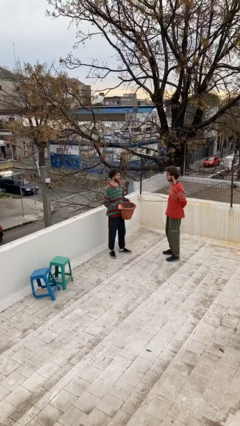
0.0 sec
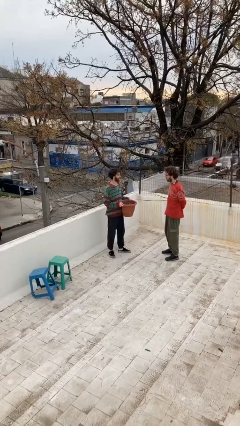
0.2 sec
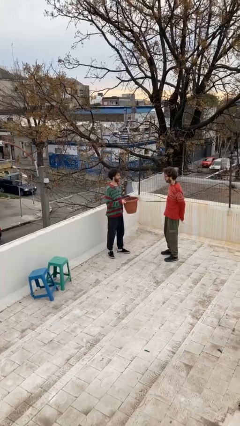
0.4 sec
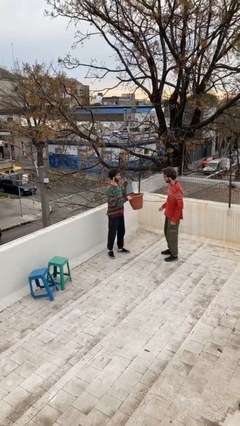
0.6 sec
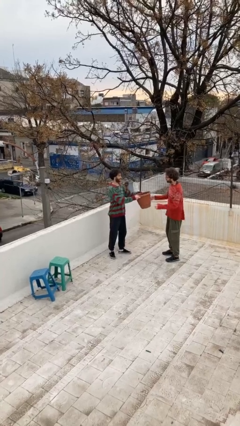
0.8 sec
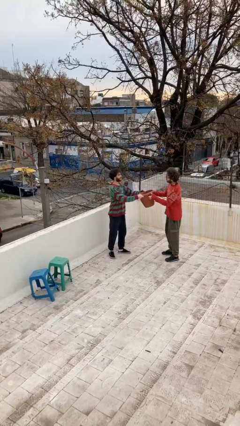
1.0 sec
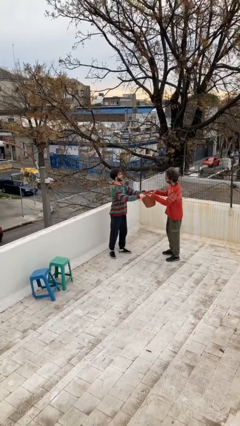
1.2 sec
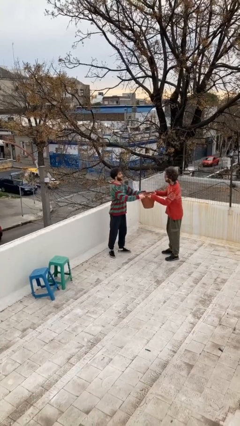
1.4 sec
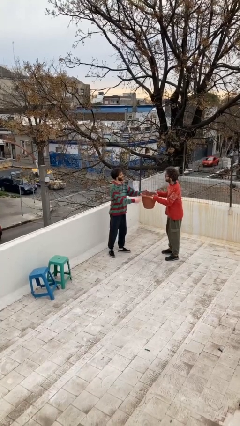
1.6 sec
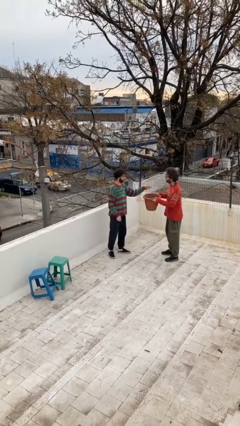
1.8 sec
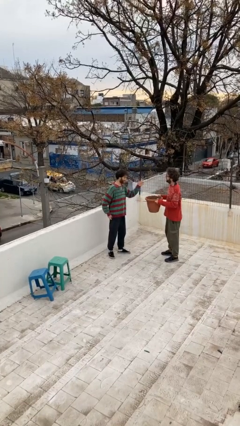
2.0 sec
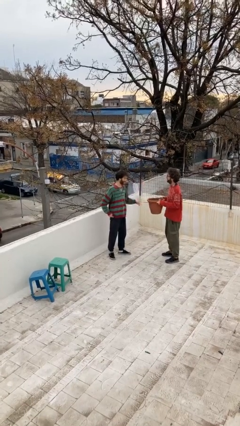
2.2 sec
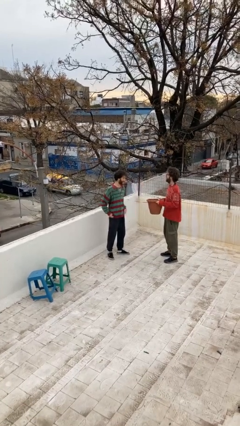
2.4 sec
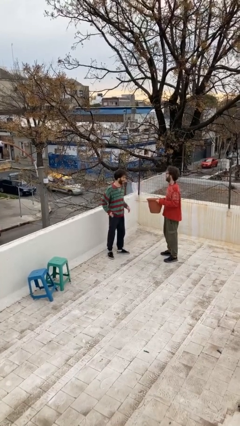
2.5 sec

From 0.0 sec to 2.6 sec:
person transfers object to person

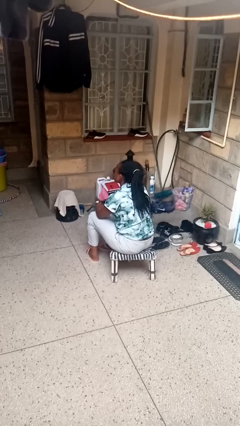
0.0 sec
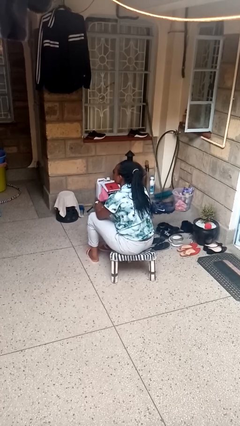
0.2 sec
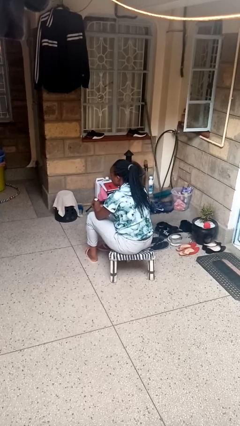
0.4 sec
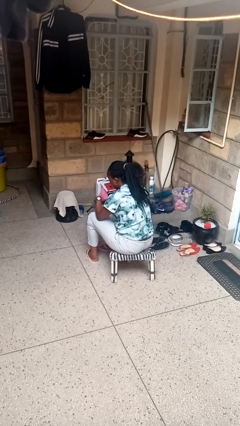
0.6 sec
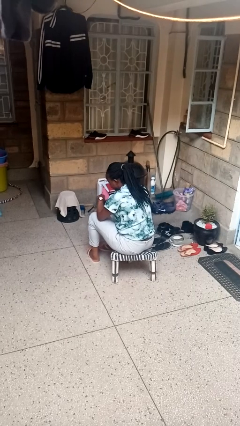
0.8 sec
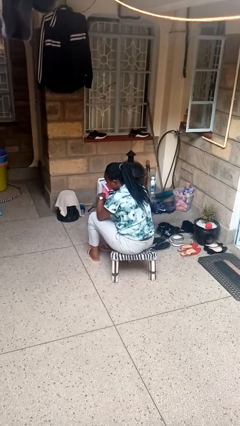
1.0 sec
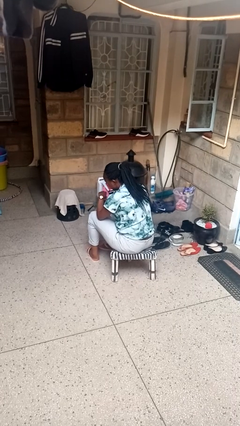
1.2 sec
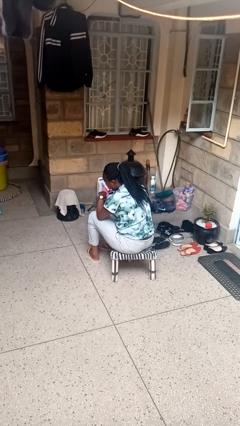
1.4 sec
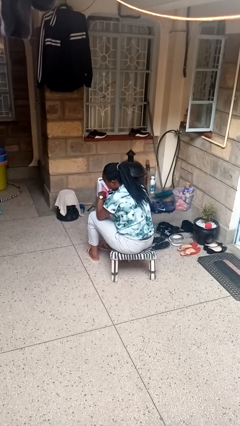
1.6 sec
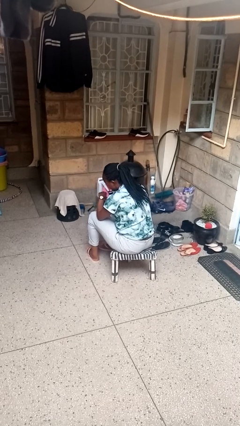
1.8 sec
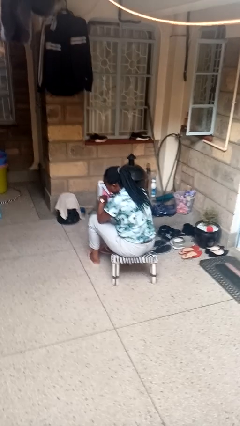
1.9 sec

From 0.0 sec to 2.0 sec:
person looks at wristwatch

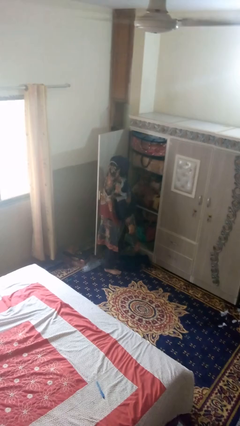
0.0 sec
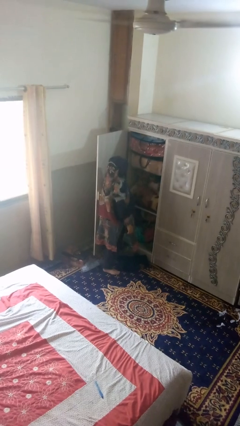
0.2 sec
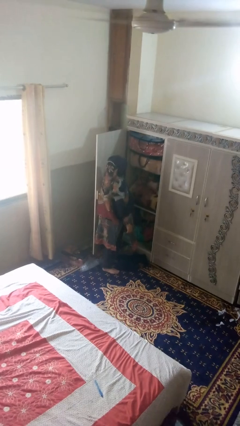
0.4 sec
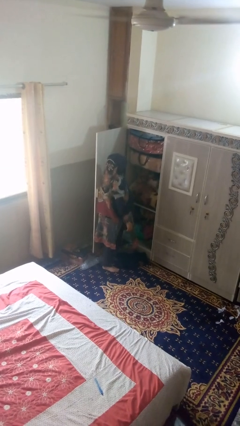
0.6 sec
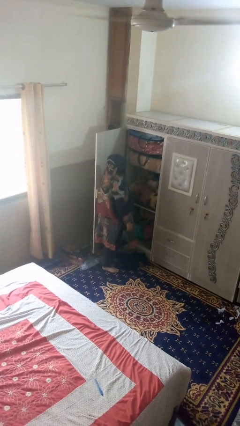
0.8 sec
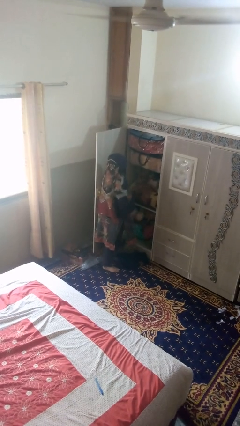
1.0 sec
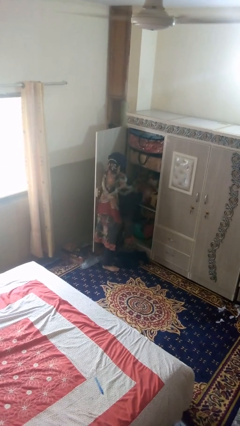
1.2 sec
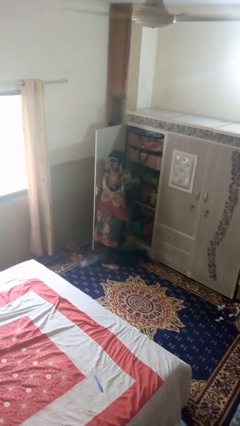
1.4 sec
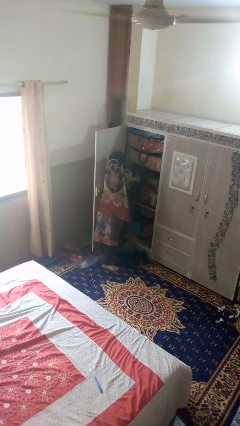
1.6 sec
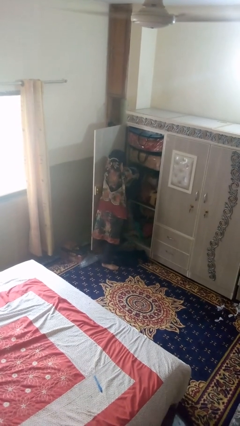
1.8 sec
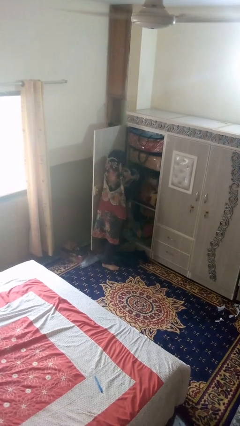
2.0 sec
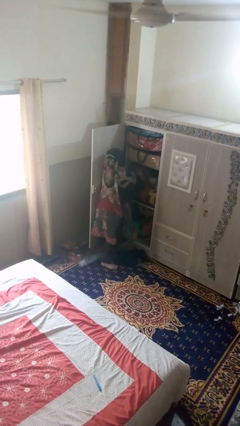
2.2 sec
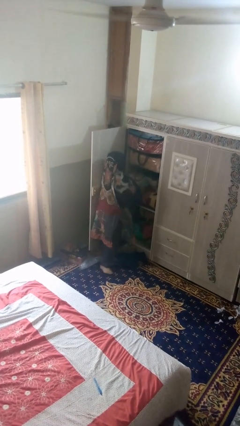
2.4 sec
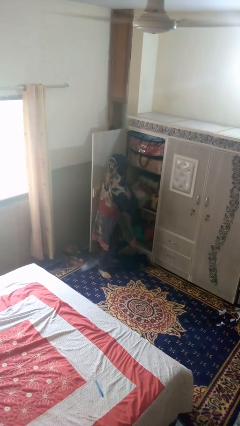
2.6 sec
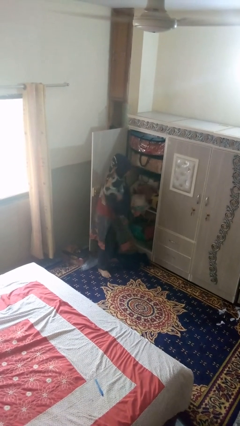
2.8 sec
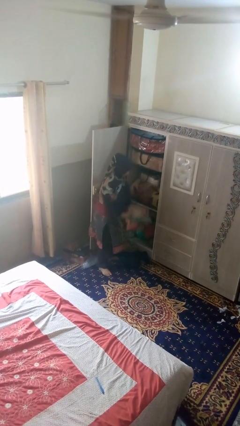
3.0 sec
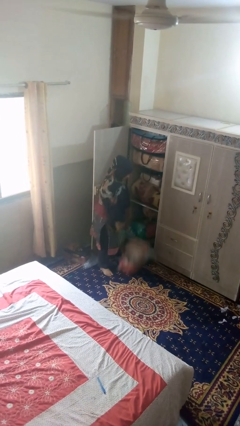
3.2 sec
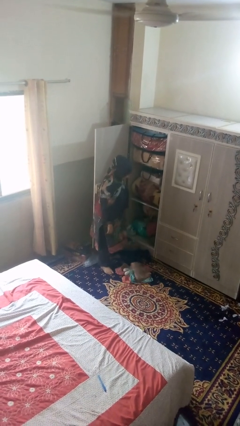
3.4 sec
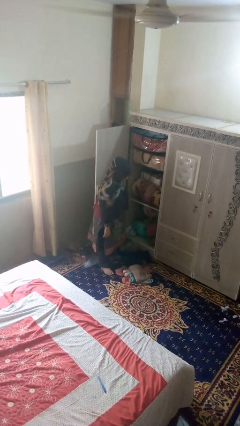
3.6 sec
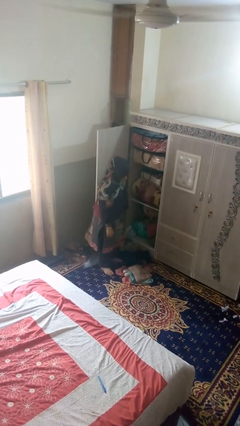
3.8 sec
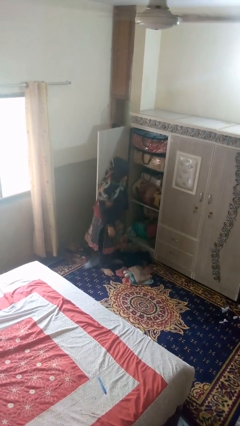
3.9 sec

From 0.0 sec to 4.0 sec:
person puts clothes into dresser

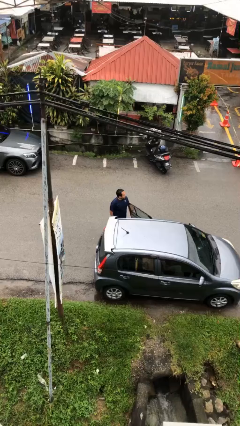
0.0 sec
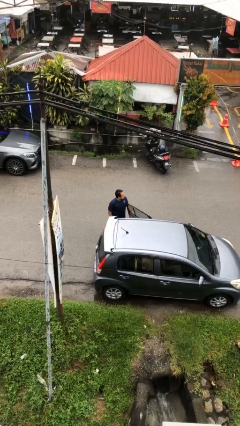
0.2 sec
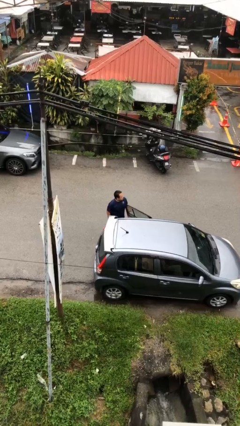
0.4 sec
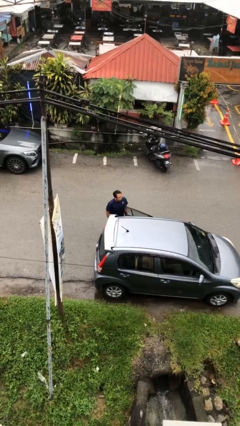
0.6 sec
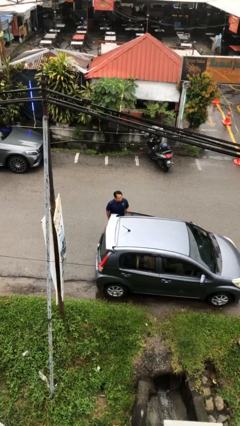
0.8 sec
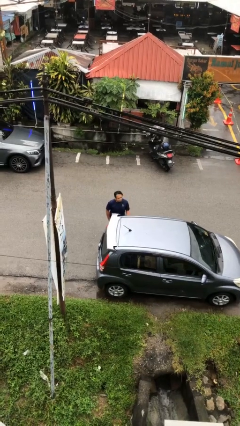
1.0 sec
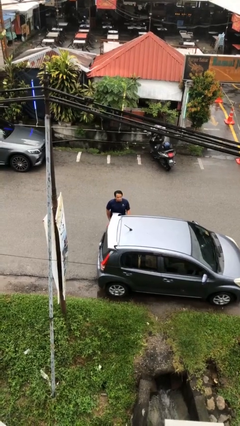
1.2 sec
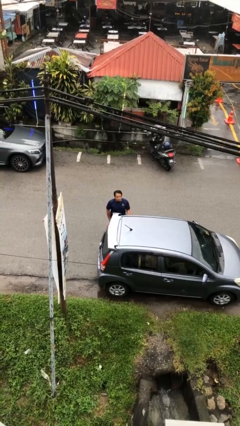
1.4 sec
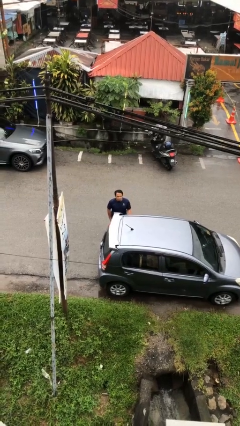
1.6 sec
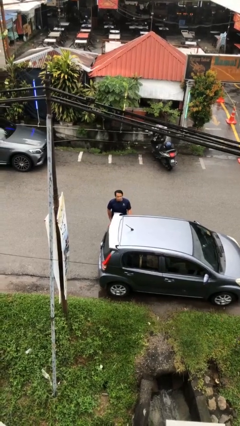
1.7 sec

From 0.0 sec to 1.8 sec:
person closes car door

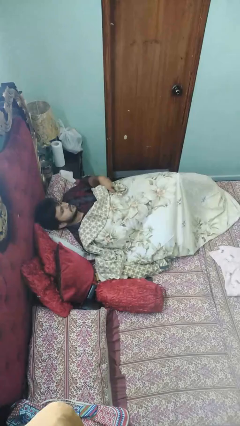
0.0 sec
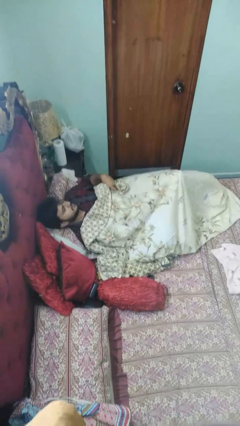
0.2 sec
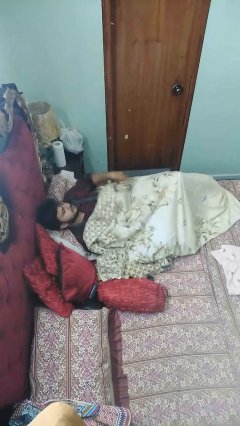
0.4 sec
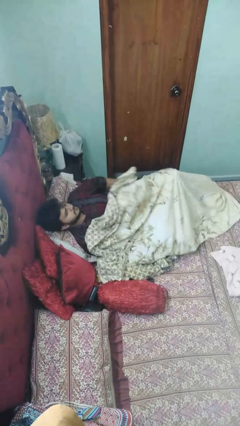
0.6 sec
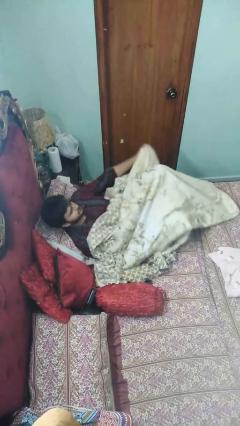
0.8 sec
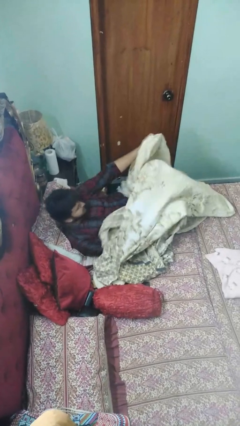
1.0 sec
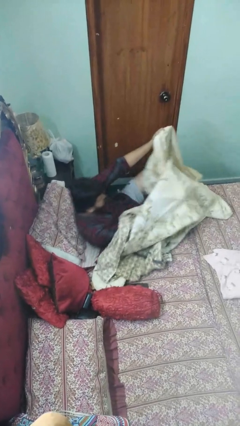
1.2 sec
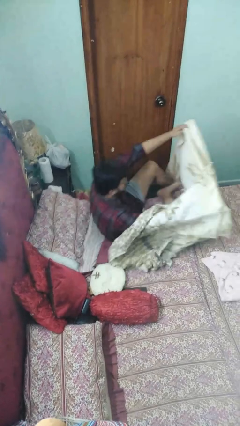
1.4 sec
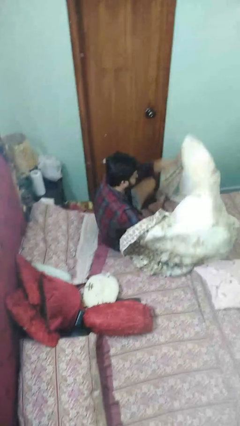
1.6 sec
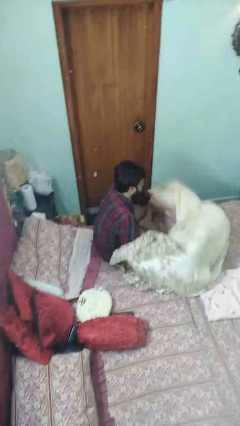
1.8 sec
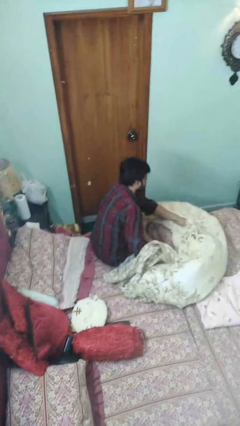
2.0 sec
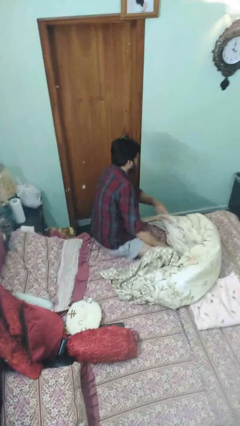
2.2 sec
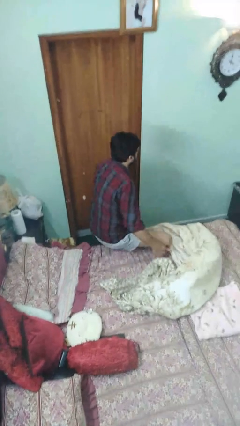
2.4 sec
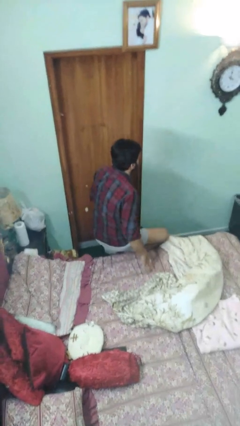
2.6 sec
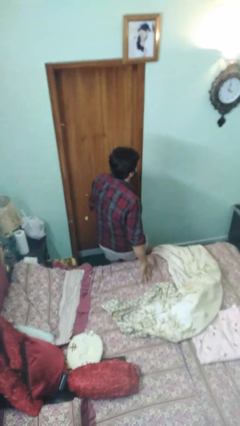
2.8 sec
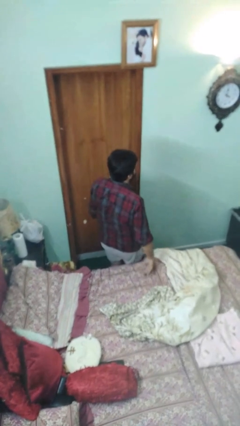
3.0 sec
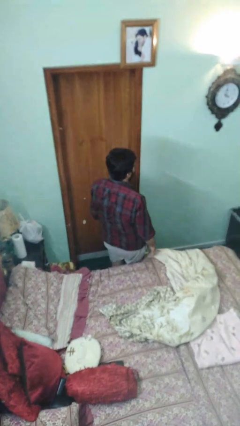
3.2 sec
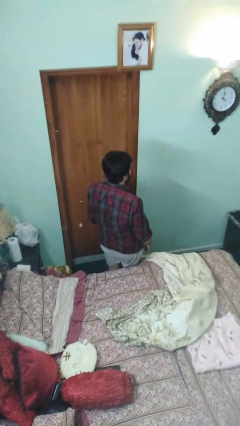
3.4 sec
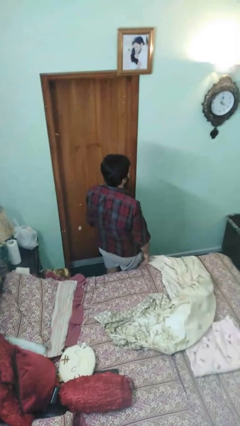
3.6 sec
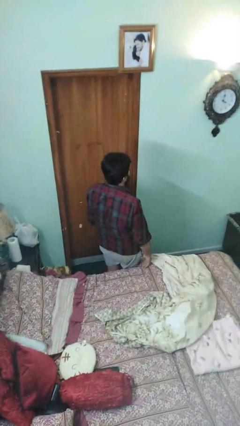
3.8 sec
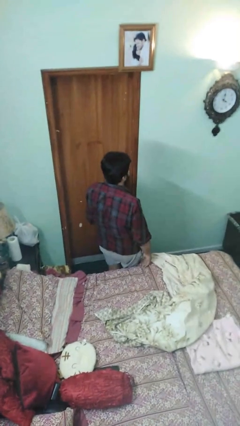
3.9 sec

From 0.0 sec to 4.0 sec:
person uncovers with bedsheets

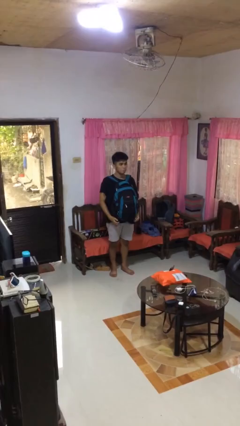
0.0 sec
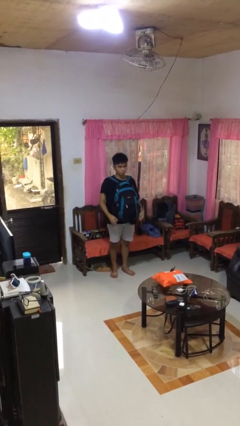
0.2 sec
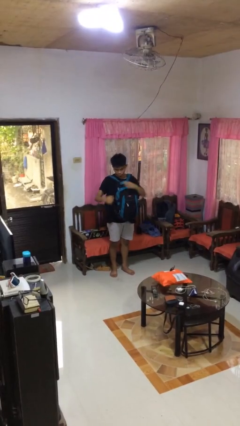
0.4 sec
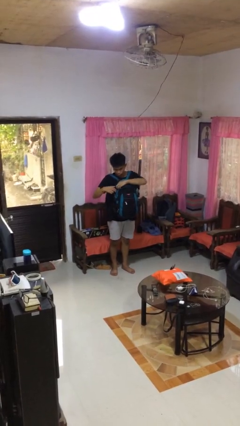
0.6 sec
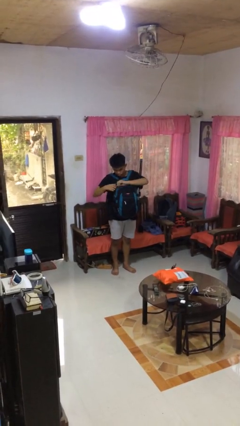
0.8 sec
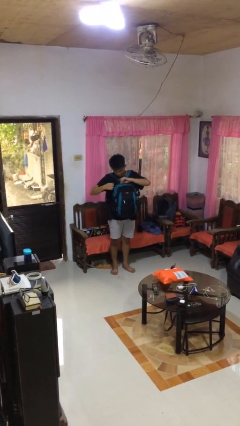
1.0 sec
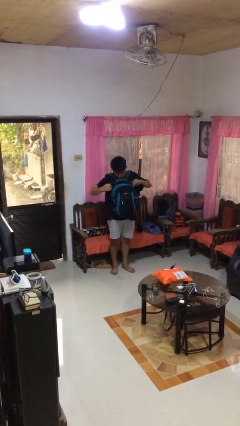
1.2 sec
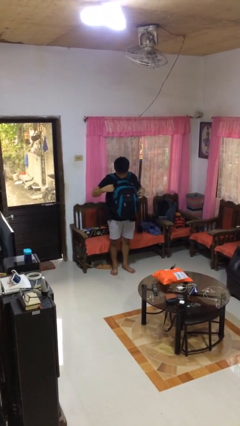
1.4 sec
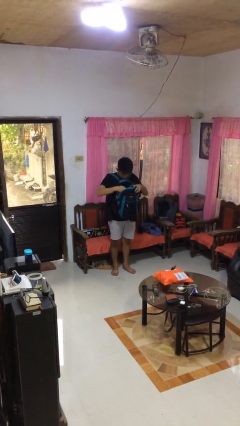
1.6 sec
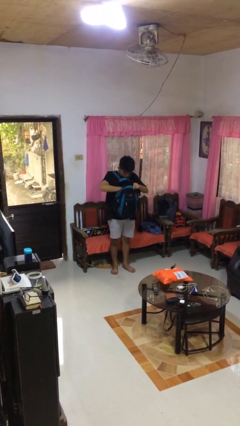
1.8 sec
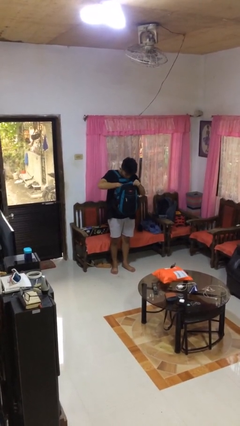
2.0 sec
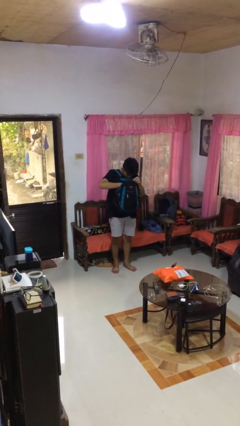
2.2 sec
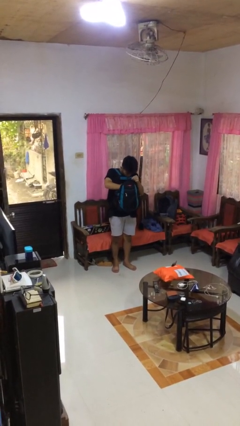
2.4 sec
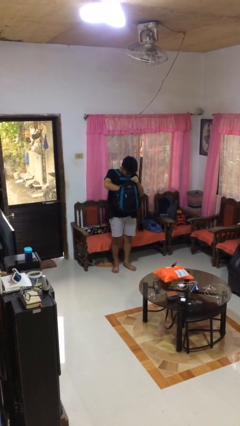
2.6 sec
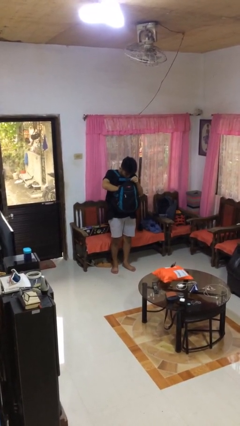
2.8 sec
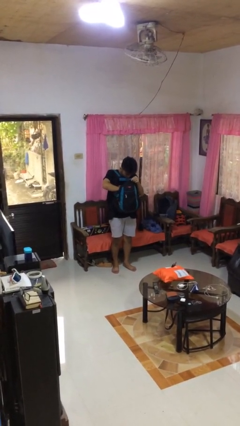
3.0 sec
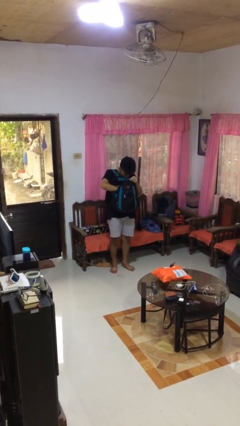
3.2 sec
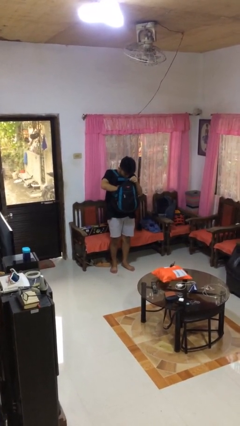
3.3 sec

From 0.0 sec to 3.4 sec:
person searches in backpack
